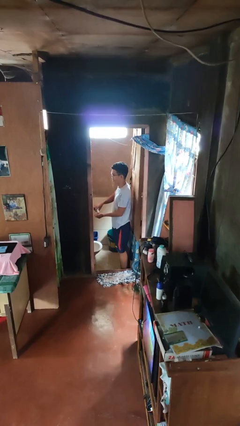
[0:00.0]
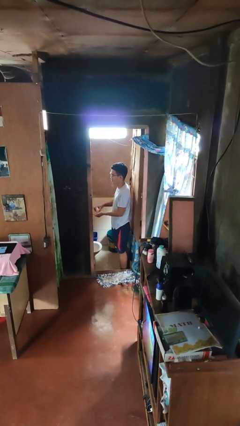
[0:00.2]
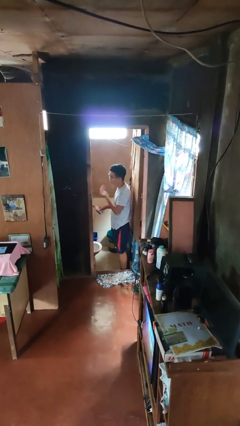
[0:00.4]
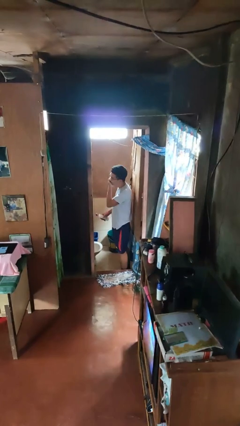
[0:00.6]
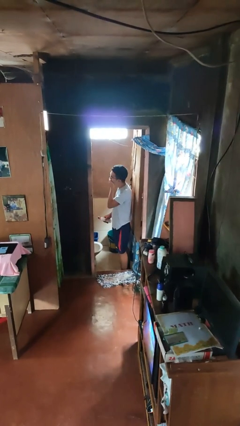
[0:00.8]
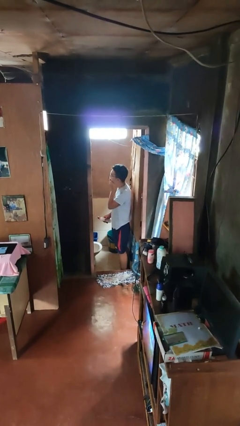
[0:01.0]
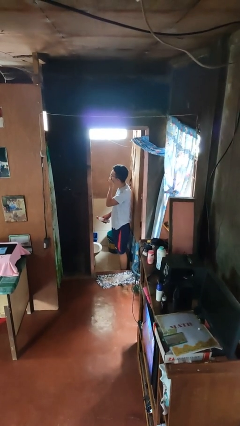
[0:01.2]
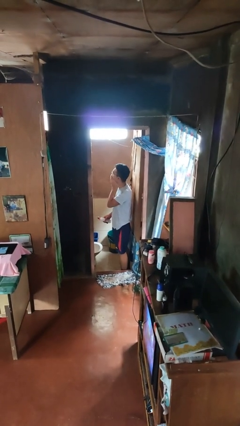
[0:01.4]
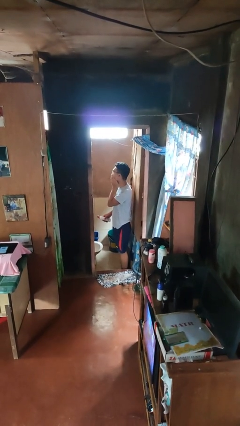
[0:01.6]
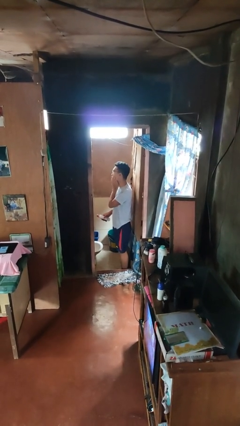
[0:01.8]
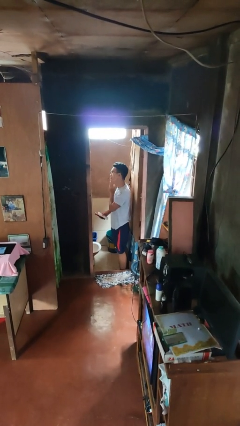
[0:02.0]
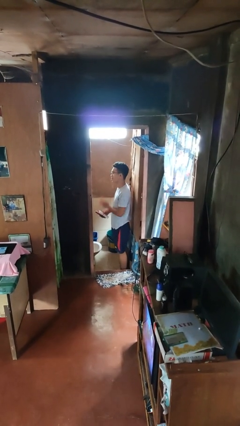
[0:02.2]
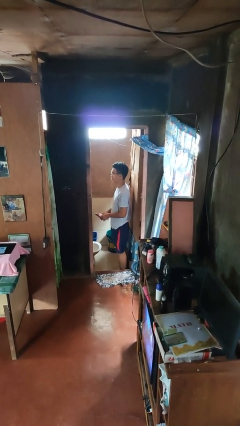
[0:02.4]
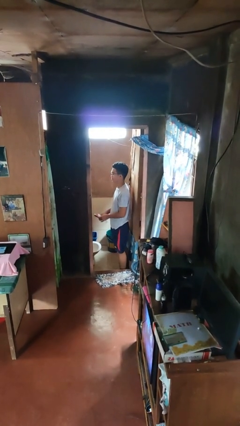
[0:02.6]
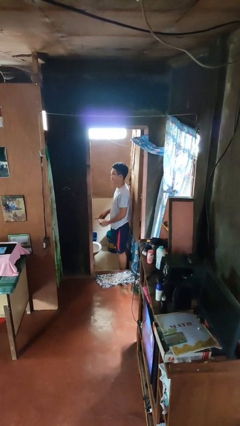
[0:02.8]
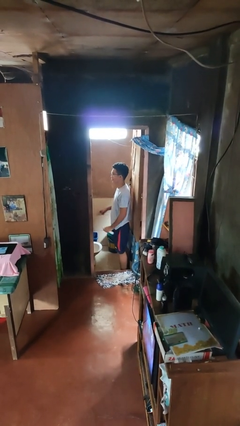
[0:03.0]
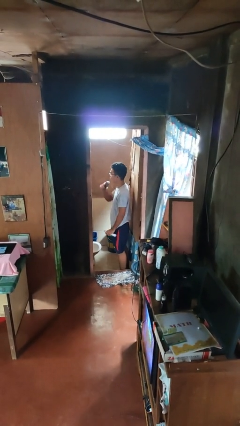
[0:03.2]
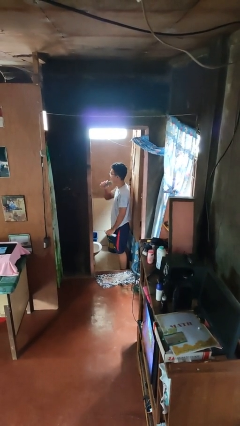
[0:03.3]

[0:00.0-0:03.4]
person applies shaving cream

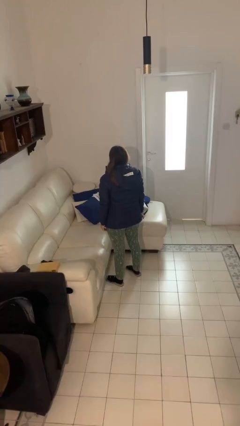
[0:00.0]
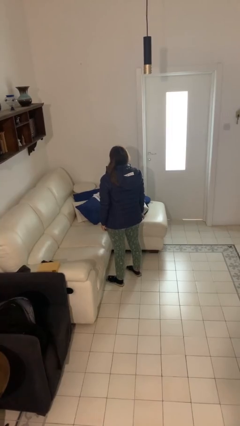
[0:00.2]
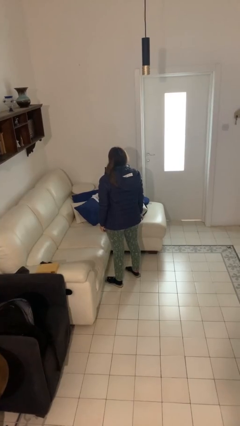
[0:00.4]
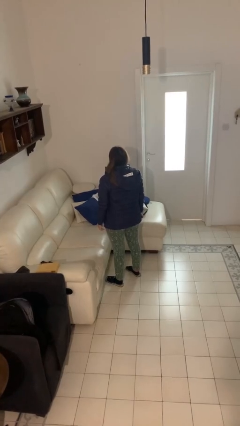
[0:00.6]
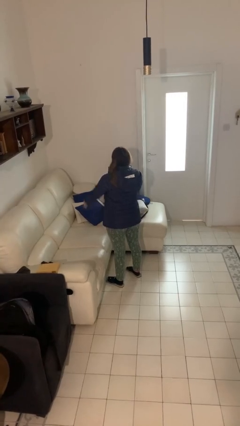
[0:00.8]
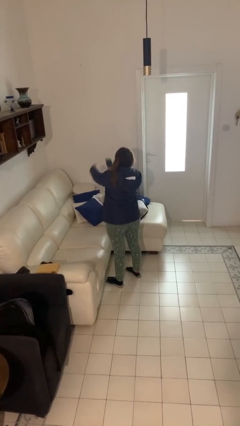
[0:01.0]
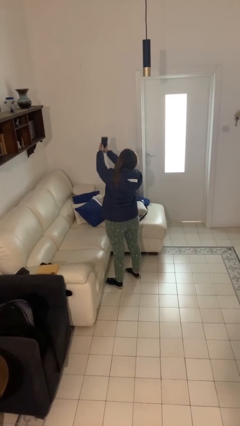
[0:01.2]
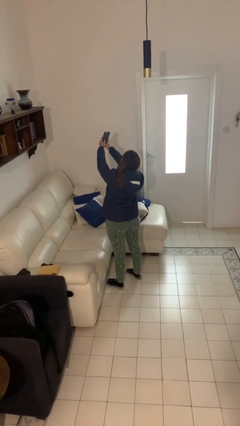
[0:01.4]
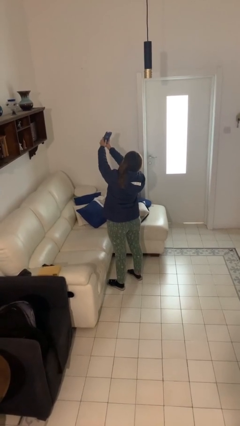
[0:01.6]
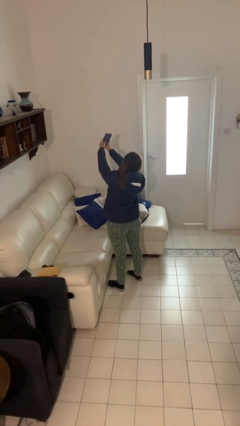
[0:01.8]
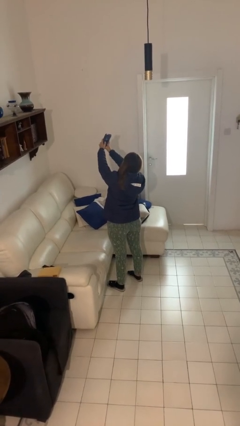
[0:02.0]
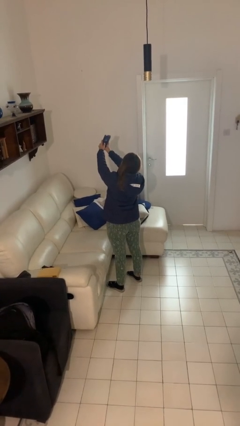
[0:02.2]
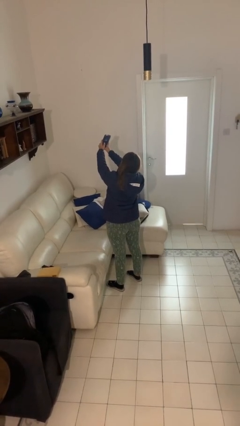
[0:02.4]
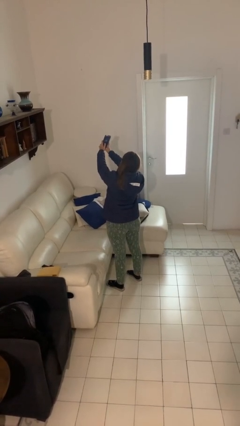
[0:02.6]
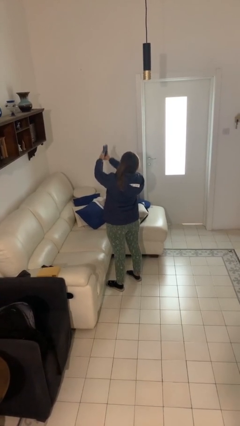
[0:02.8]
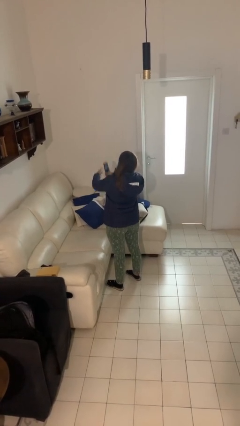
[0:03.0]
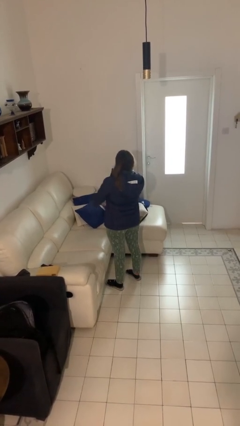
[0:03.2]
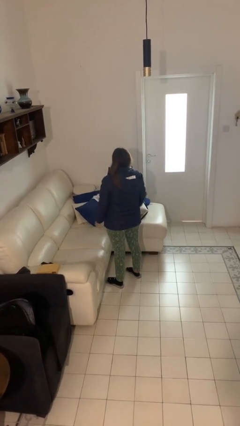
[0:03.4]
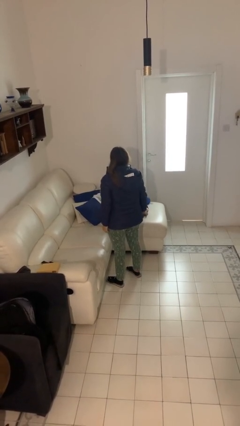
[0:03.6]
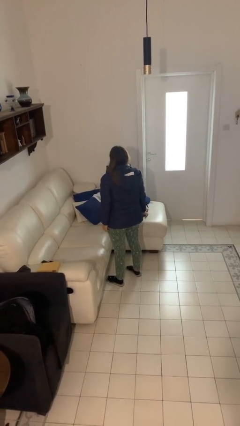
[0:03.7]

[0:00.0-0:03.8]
person takes selfie

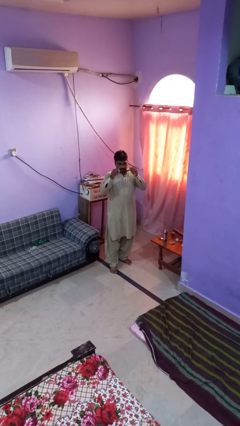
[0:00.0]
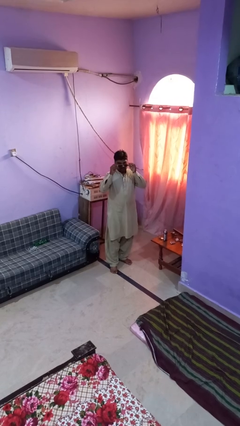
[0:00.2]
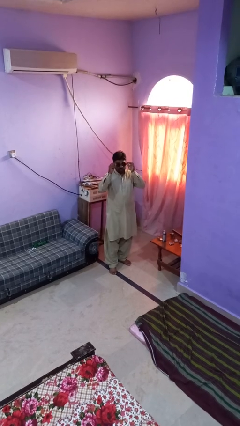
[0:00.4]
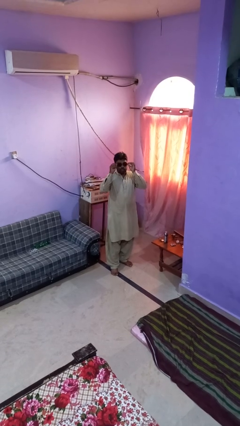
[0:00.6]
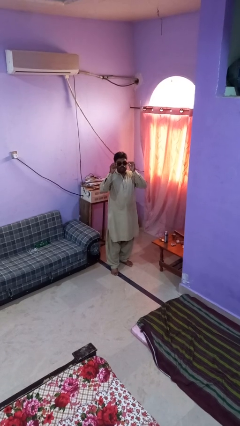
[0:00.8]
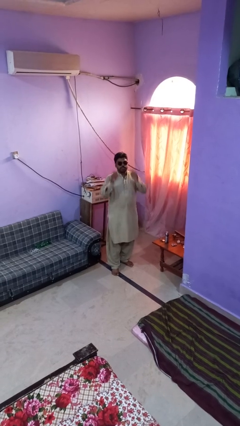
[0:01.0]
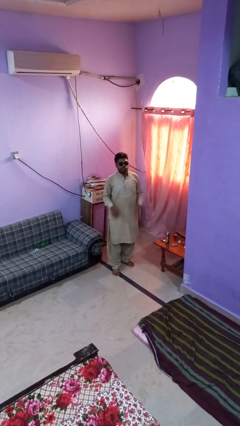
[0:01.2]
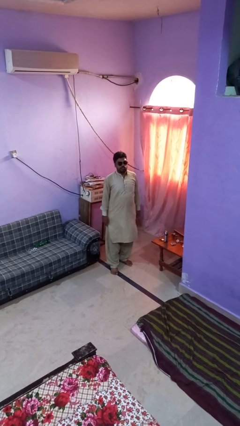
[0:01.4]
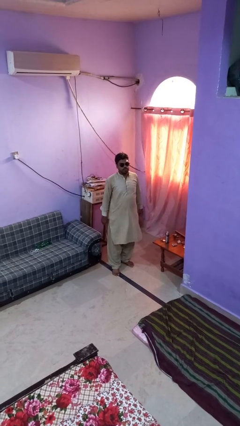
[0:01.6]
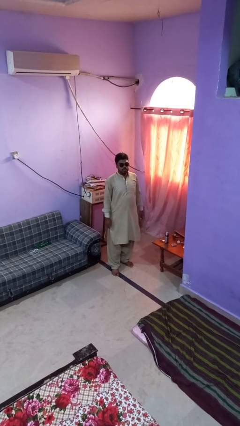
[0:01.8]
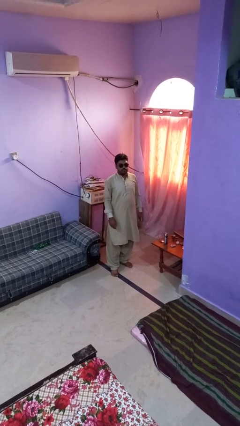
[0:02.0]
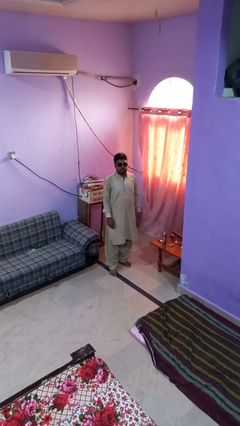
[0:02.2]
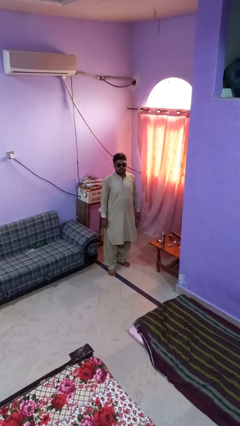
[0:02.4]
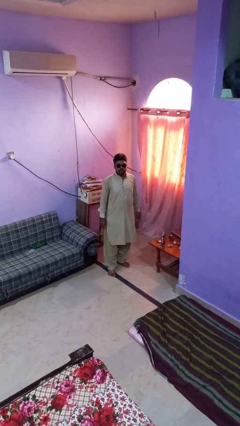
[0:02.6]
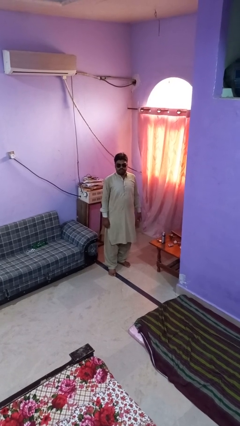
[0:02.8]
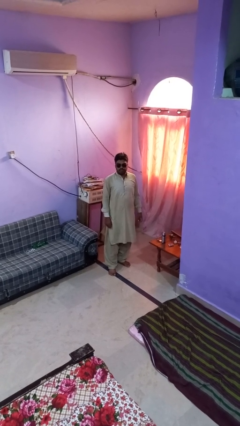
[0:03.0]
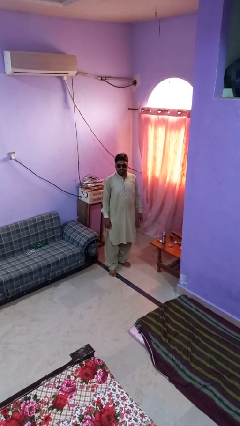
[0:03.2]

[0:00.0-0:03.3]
person puts on sunglasses

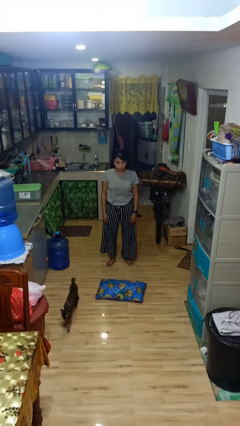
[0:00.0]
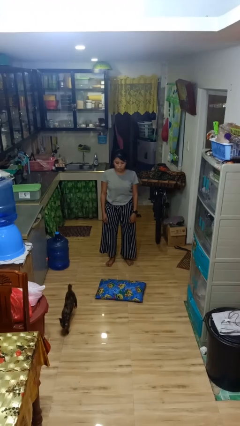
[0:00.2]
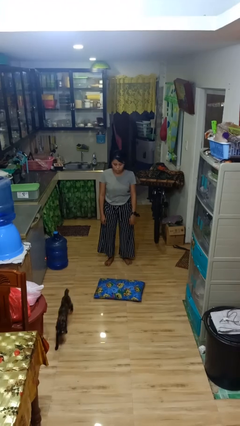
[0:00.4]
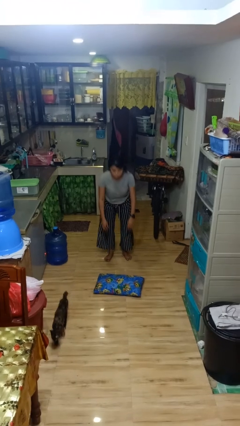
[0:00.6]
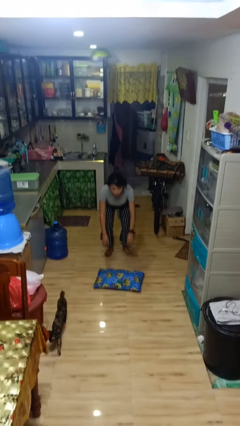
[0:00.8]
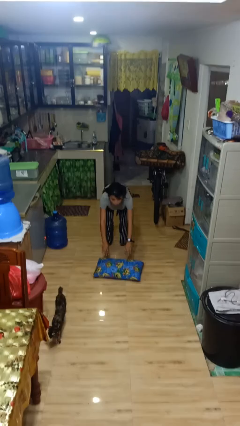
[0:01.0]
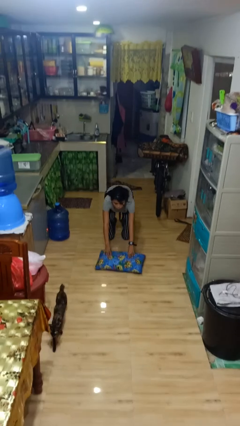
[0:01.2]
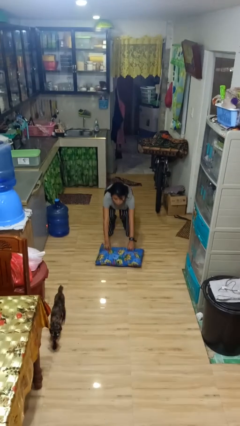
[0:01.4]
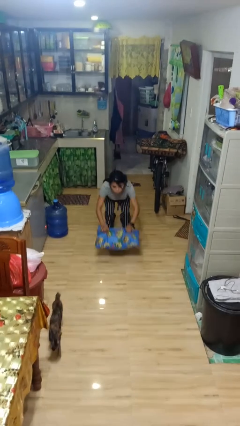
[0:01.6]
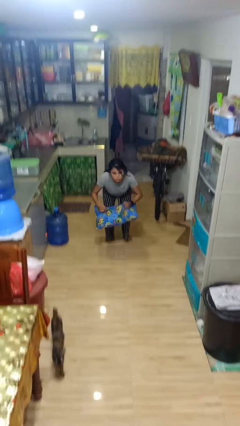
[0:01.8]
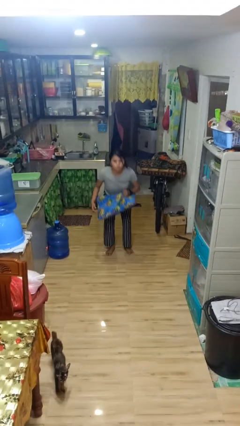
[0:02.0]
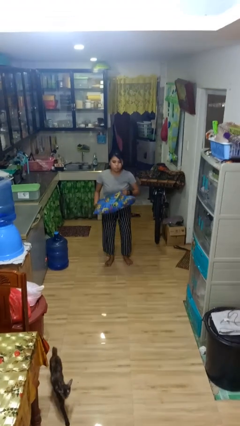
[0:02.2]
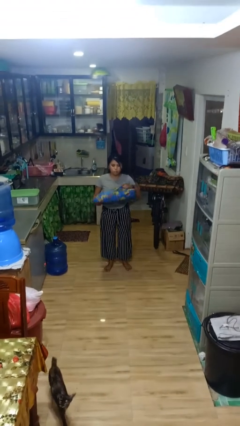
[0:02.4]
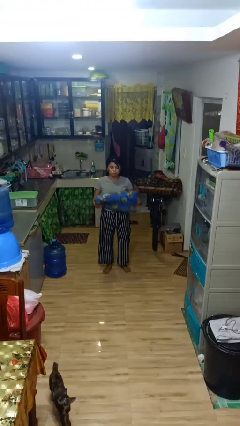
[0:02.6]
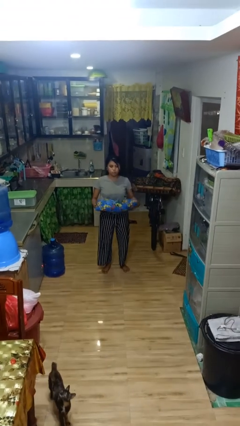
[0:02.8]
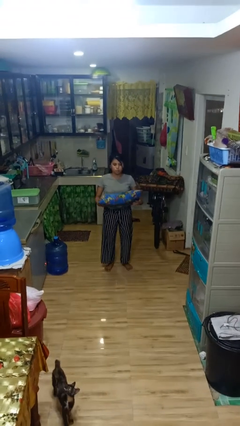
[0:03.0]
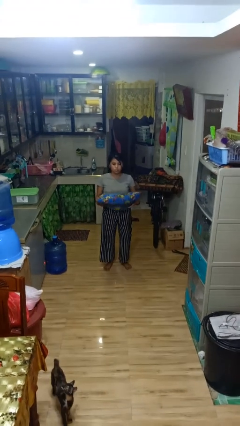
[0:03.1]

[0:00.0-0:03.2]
person picks up object from floor

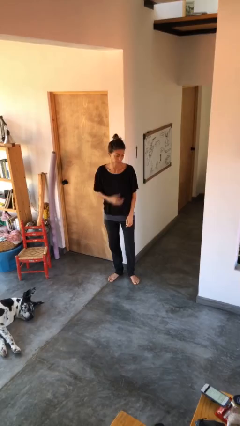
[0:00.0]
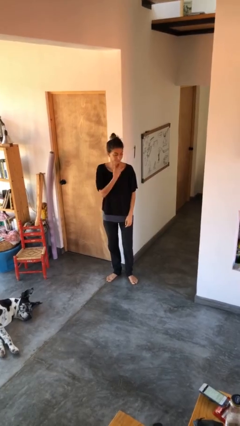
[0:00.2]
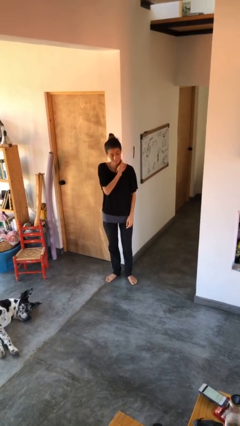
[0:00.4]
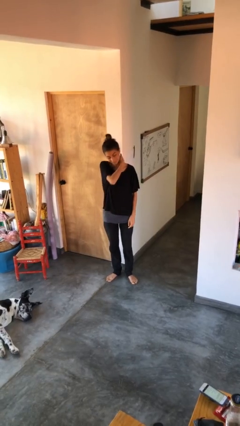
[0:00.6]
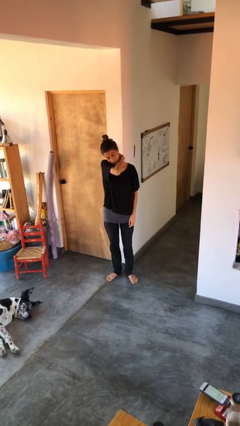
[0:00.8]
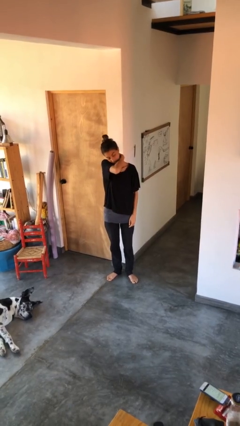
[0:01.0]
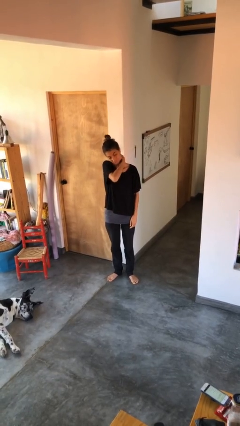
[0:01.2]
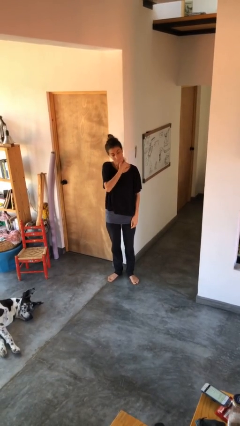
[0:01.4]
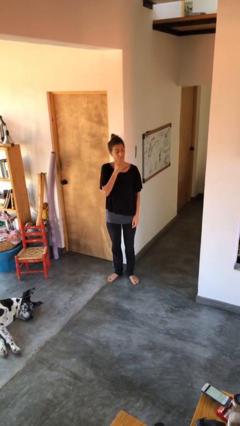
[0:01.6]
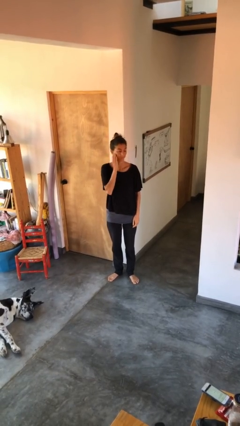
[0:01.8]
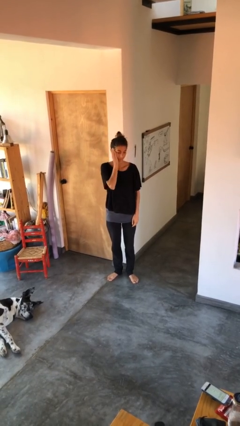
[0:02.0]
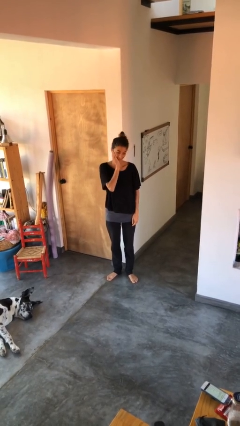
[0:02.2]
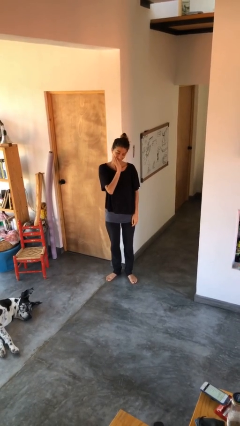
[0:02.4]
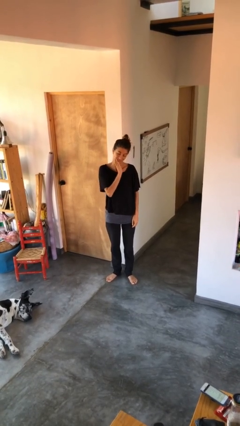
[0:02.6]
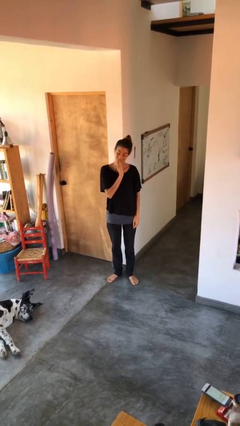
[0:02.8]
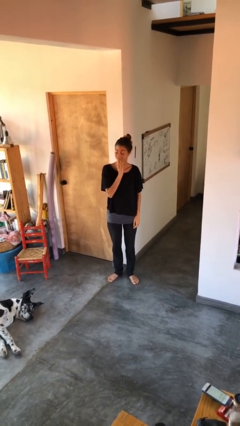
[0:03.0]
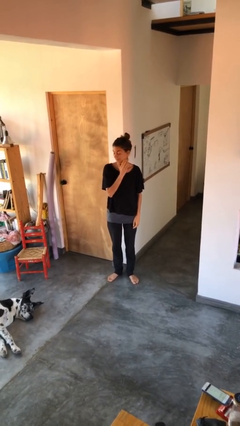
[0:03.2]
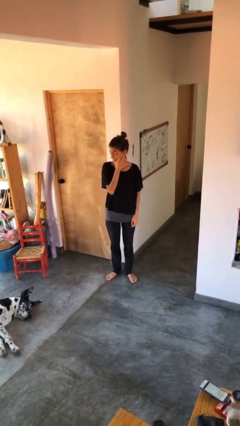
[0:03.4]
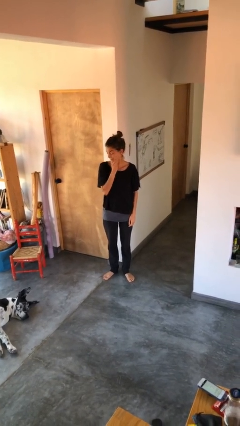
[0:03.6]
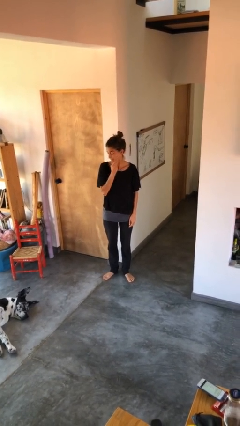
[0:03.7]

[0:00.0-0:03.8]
person scratches face

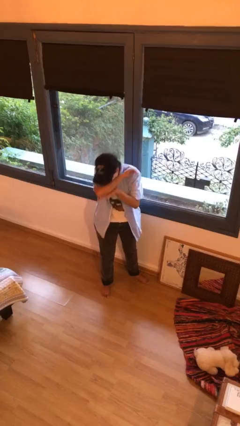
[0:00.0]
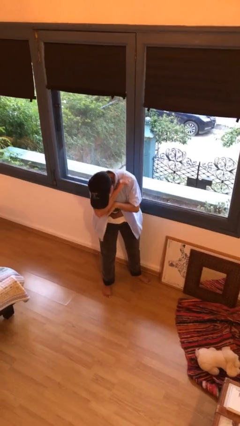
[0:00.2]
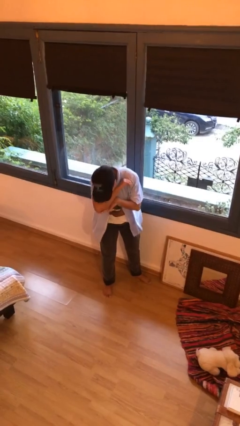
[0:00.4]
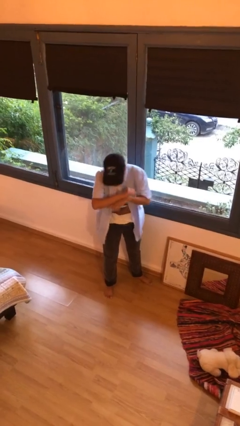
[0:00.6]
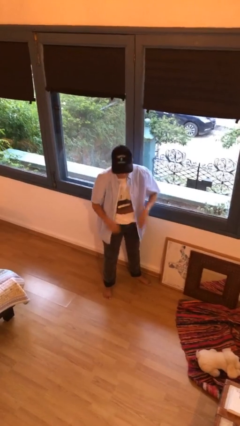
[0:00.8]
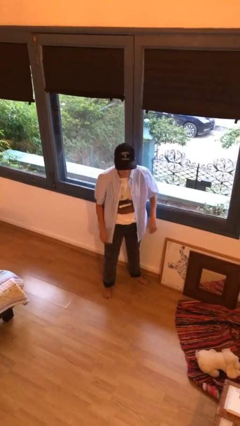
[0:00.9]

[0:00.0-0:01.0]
person sneezes into arm
